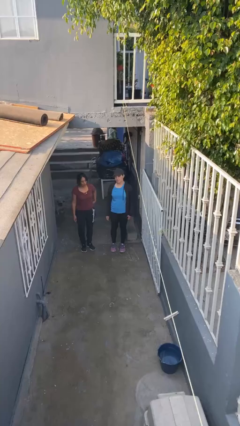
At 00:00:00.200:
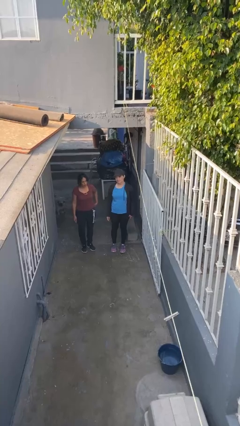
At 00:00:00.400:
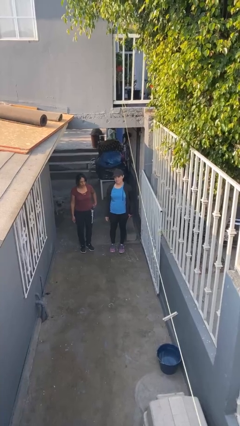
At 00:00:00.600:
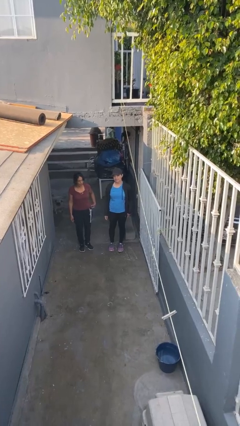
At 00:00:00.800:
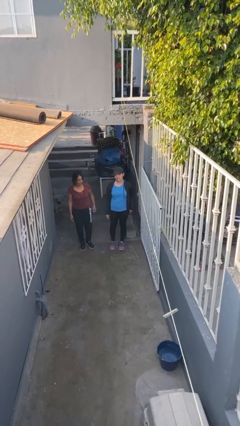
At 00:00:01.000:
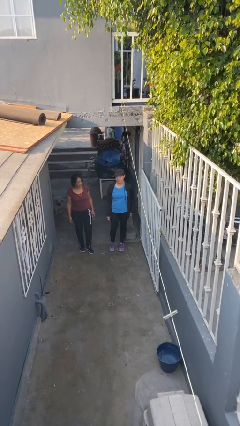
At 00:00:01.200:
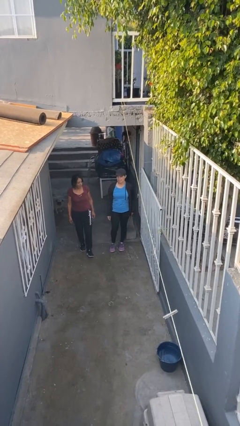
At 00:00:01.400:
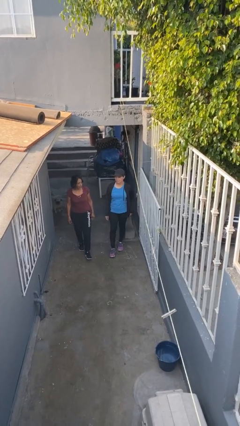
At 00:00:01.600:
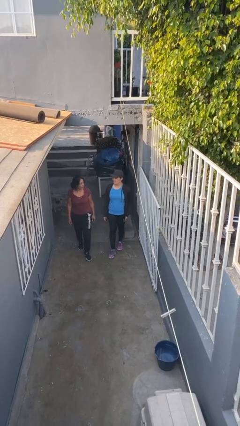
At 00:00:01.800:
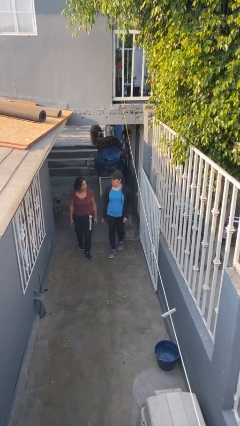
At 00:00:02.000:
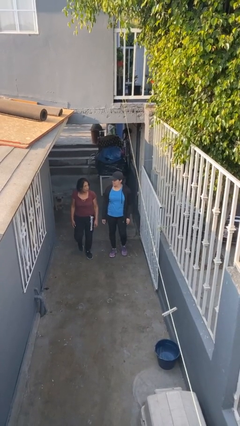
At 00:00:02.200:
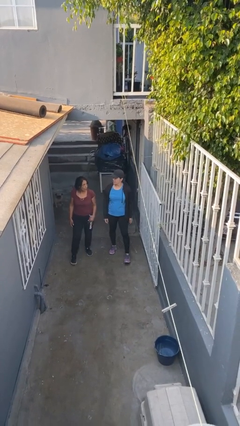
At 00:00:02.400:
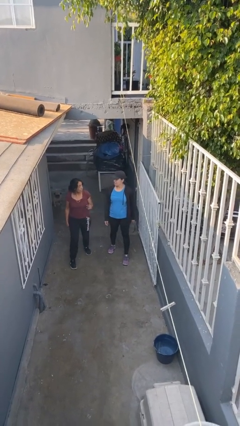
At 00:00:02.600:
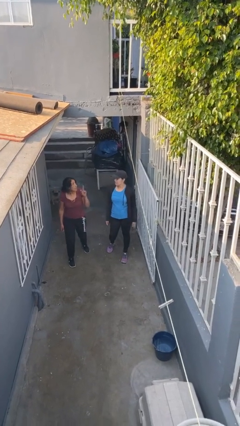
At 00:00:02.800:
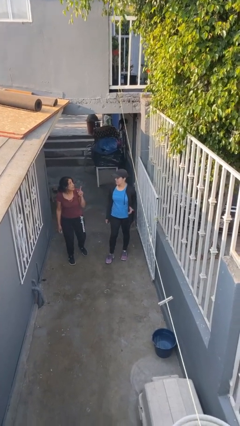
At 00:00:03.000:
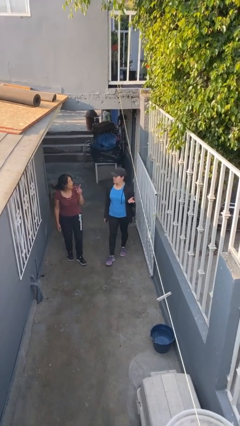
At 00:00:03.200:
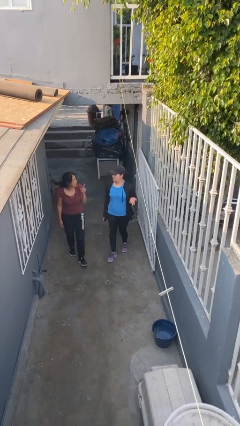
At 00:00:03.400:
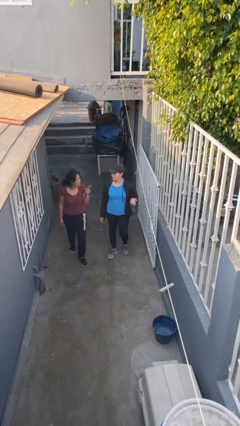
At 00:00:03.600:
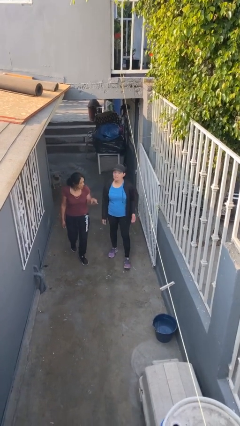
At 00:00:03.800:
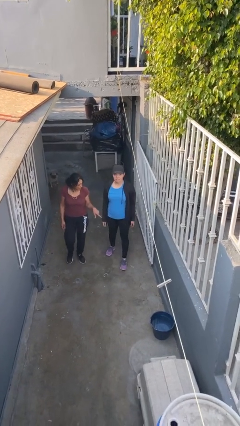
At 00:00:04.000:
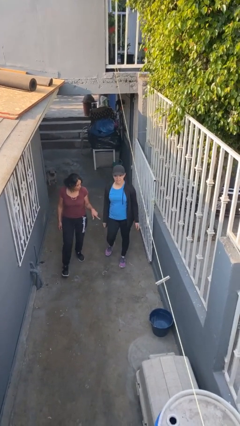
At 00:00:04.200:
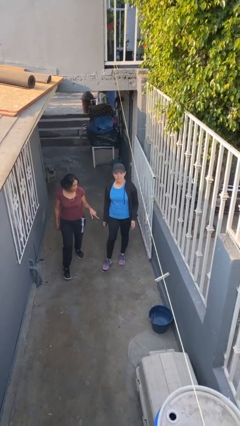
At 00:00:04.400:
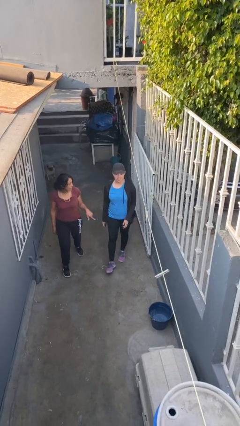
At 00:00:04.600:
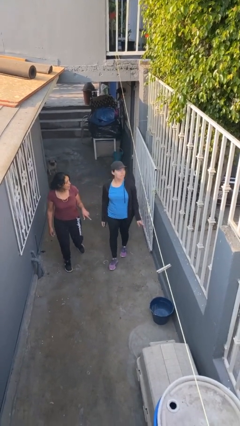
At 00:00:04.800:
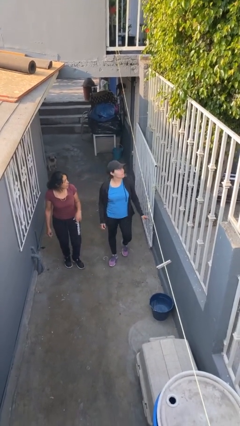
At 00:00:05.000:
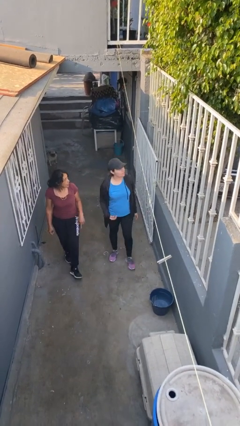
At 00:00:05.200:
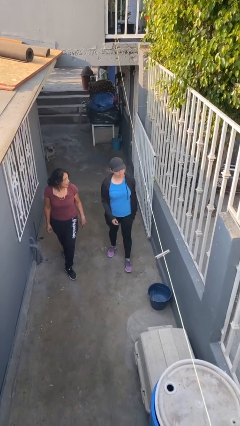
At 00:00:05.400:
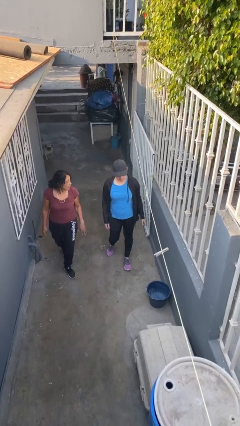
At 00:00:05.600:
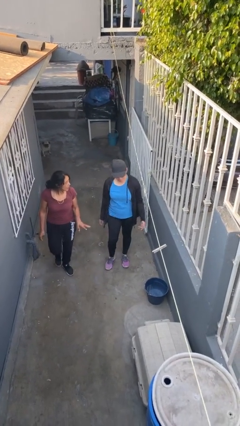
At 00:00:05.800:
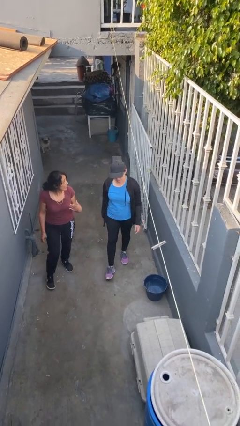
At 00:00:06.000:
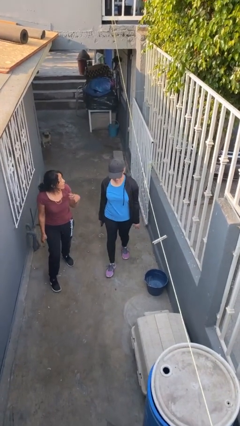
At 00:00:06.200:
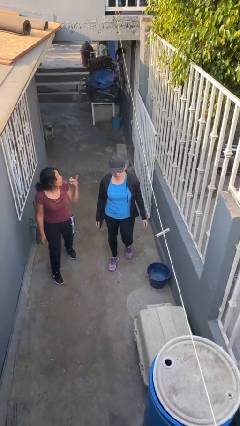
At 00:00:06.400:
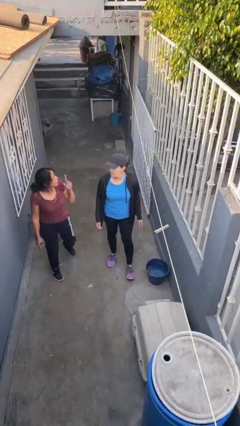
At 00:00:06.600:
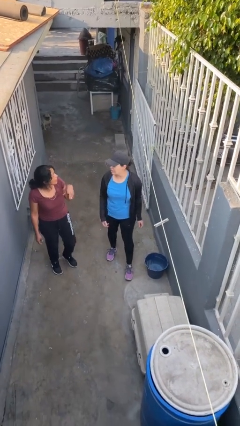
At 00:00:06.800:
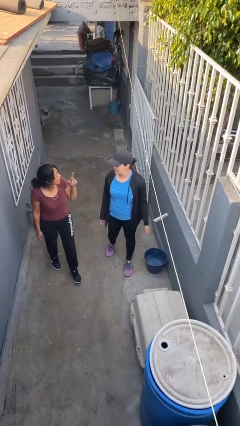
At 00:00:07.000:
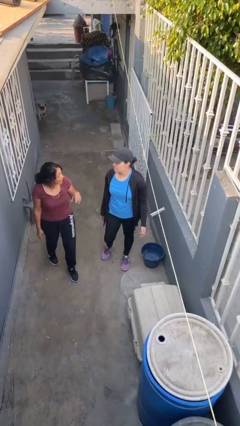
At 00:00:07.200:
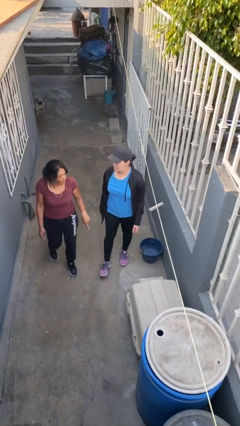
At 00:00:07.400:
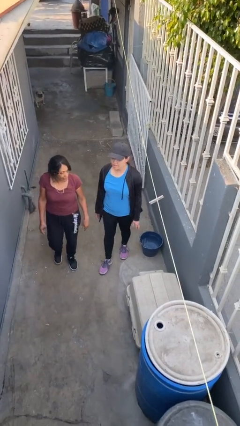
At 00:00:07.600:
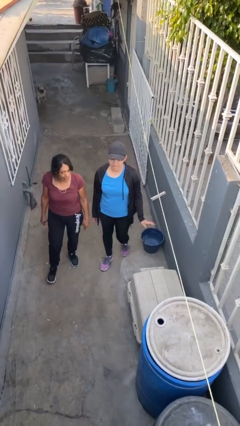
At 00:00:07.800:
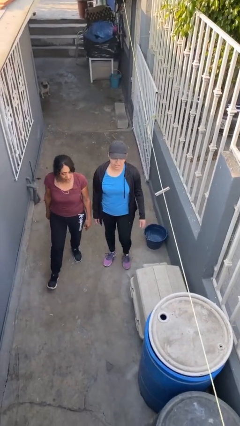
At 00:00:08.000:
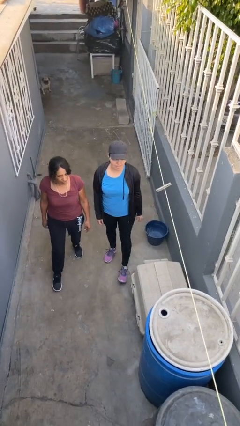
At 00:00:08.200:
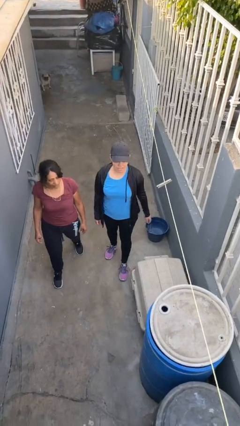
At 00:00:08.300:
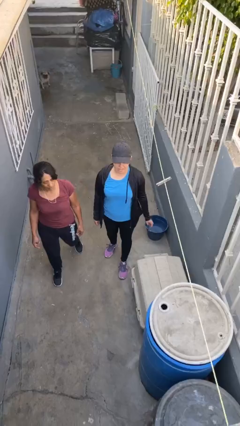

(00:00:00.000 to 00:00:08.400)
person talks to person

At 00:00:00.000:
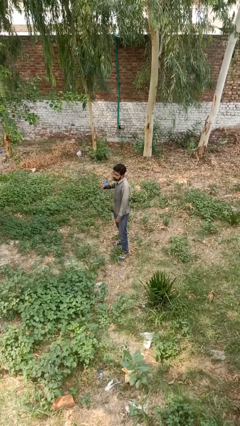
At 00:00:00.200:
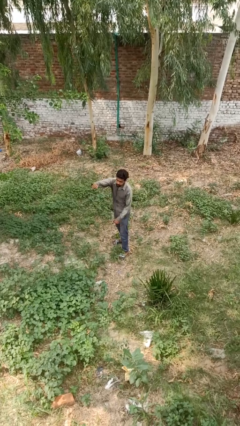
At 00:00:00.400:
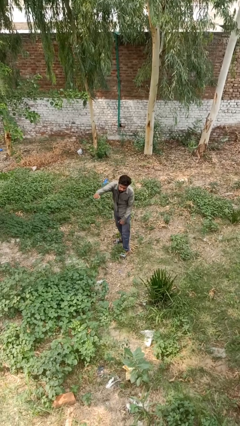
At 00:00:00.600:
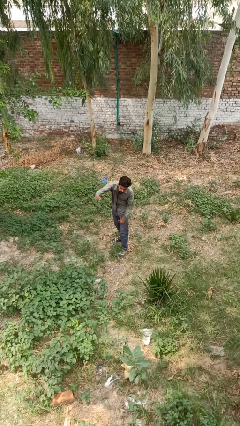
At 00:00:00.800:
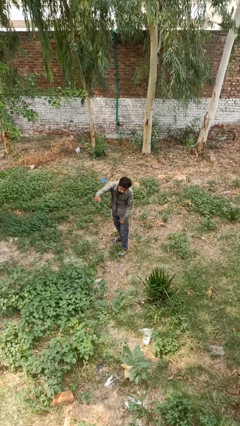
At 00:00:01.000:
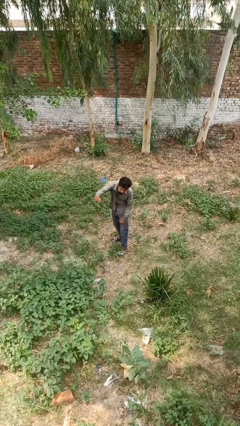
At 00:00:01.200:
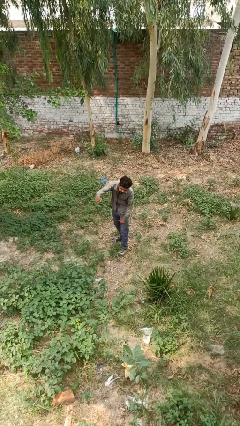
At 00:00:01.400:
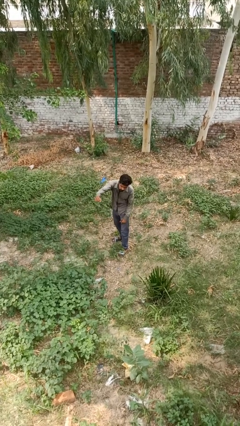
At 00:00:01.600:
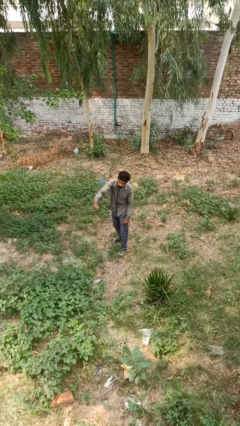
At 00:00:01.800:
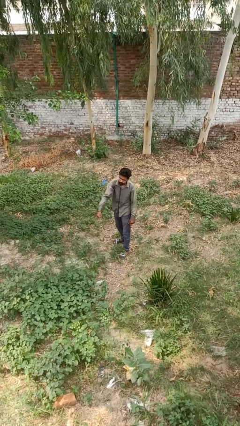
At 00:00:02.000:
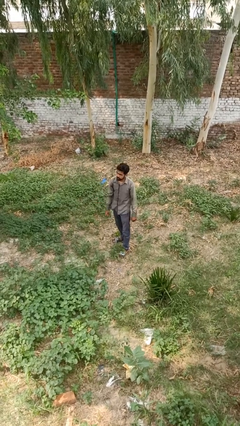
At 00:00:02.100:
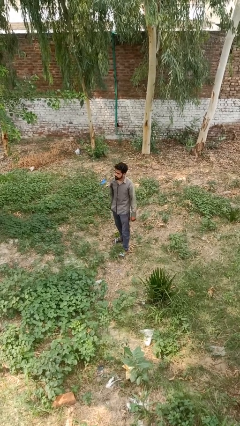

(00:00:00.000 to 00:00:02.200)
person punches

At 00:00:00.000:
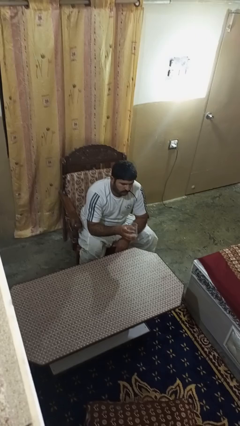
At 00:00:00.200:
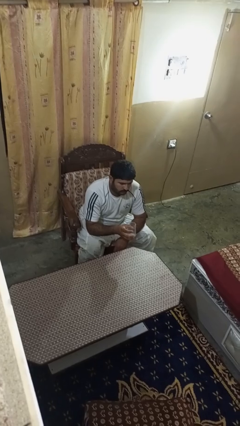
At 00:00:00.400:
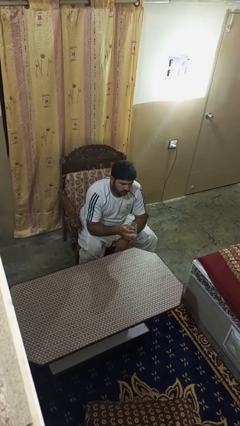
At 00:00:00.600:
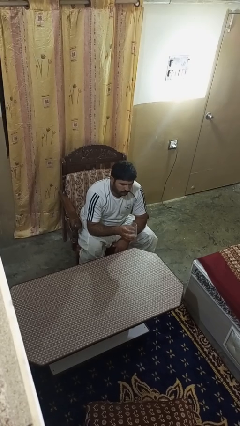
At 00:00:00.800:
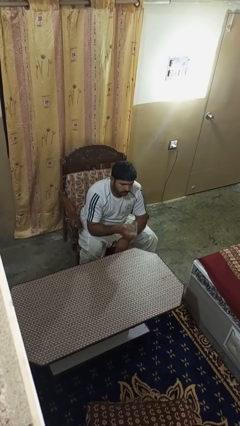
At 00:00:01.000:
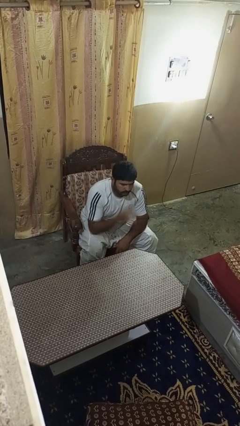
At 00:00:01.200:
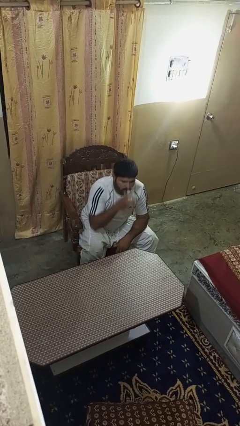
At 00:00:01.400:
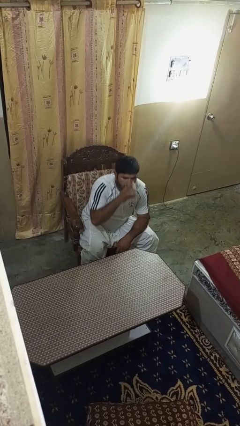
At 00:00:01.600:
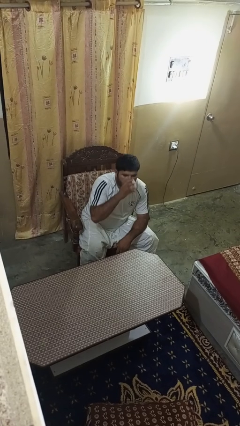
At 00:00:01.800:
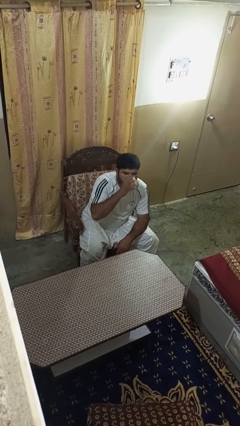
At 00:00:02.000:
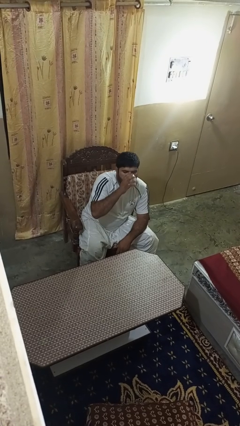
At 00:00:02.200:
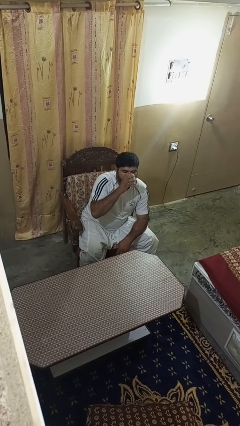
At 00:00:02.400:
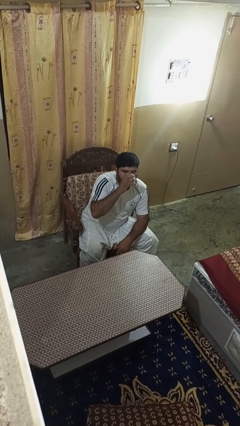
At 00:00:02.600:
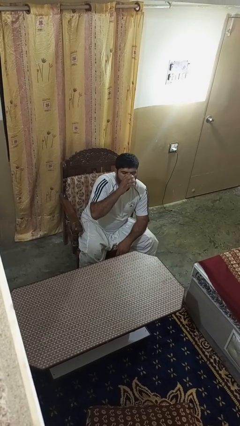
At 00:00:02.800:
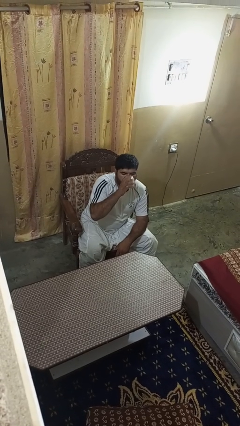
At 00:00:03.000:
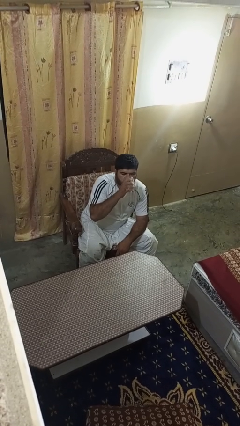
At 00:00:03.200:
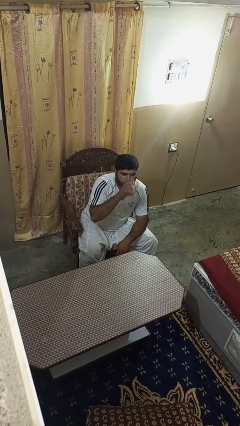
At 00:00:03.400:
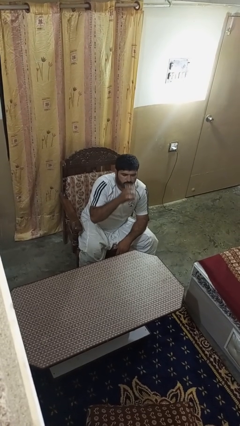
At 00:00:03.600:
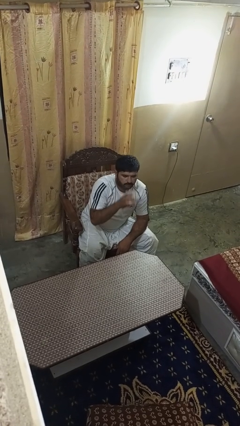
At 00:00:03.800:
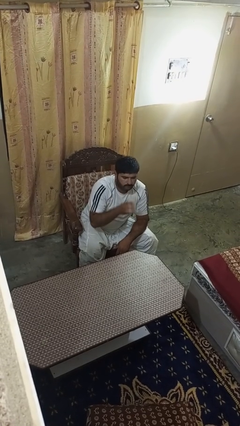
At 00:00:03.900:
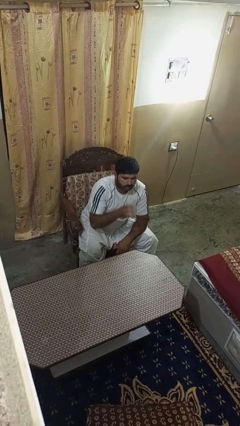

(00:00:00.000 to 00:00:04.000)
person drinks from shotglass

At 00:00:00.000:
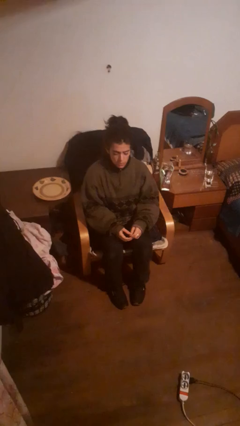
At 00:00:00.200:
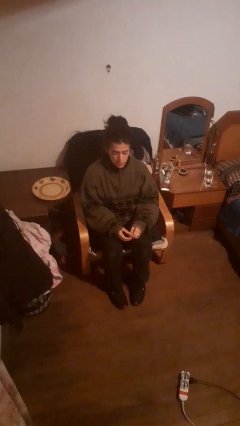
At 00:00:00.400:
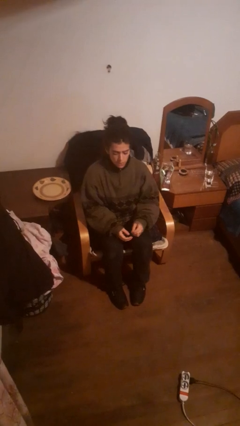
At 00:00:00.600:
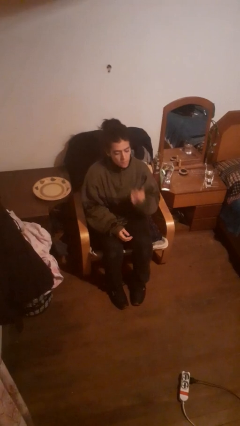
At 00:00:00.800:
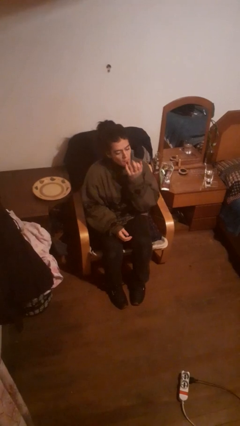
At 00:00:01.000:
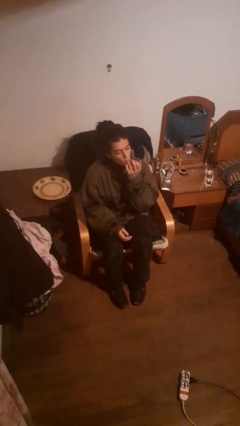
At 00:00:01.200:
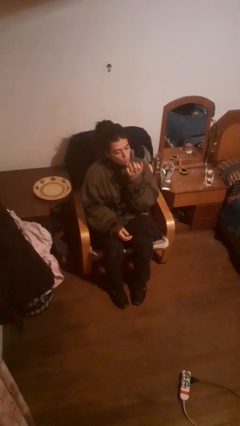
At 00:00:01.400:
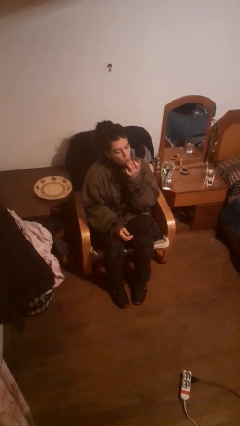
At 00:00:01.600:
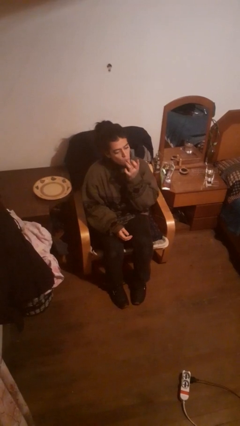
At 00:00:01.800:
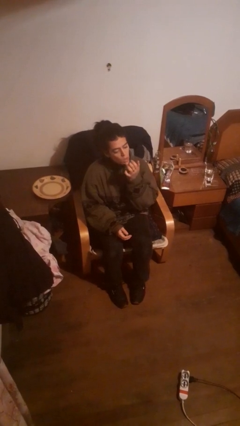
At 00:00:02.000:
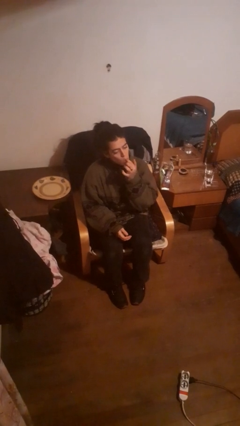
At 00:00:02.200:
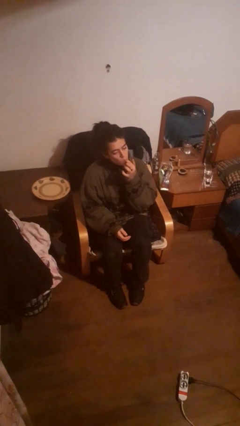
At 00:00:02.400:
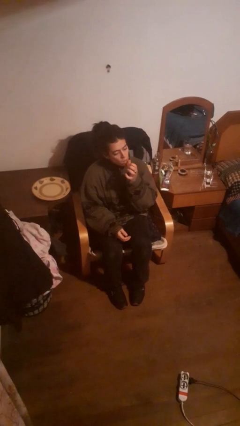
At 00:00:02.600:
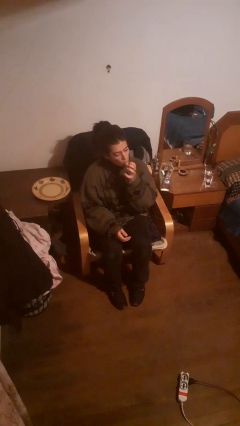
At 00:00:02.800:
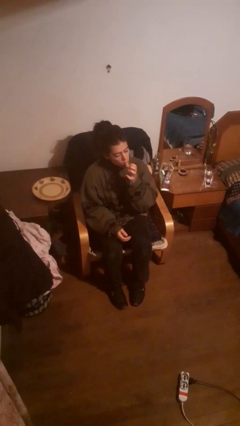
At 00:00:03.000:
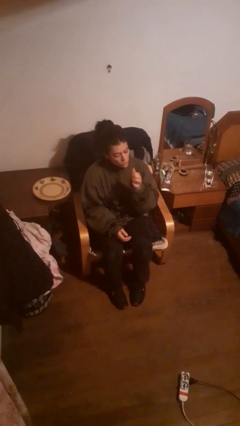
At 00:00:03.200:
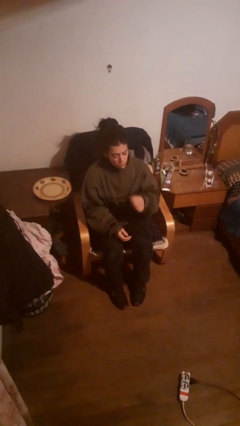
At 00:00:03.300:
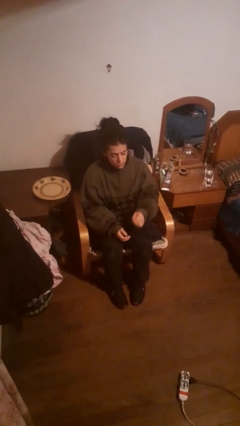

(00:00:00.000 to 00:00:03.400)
person licks fingers
